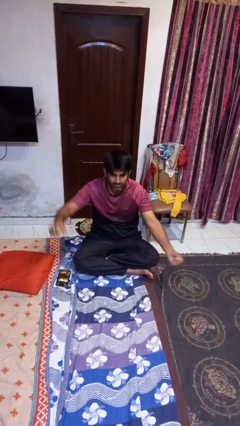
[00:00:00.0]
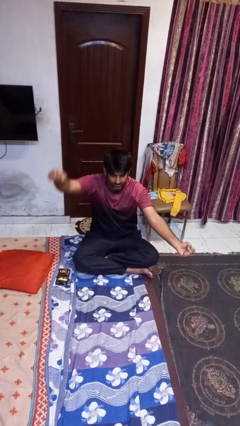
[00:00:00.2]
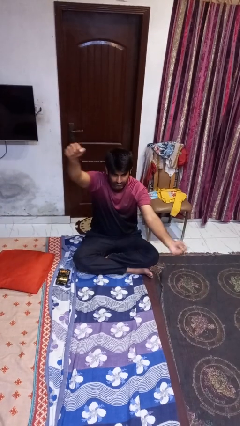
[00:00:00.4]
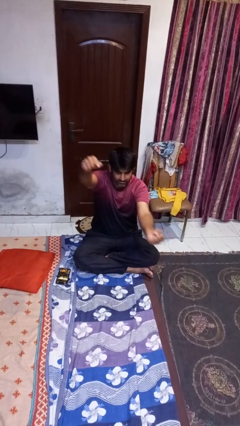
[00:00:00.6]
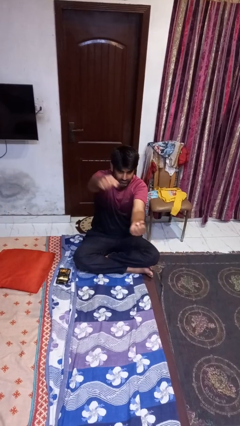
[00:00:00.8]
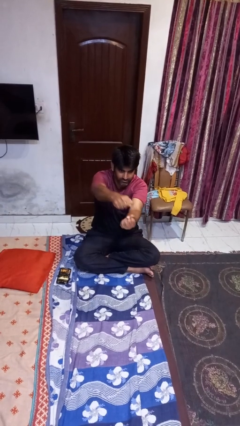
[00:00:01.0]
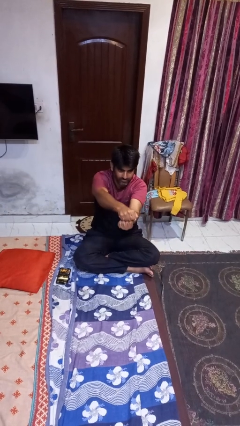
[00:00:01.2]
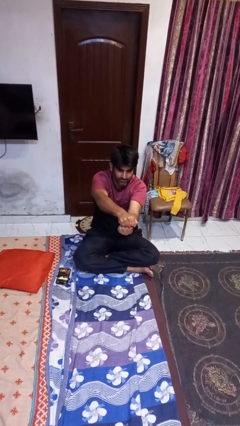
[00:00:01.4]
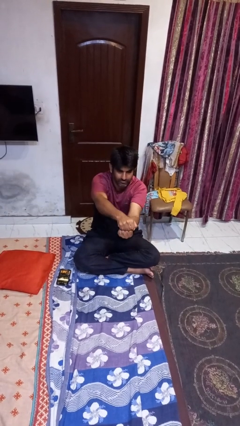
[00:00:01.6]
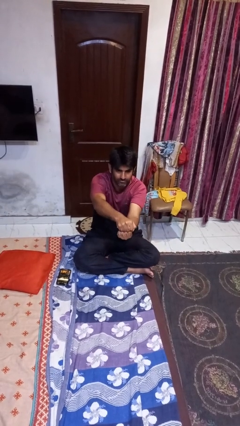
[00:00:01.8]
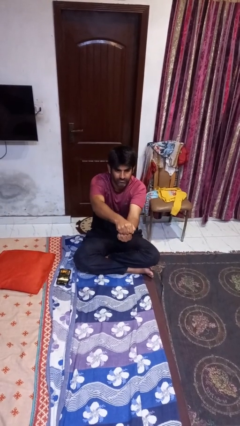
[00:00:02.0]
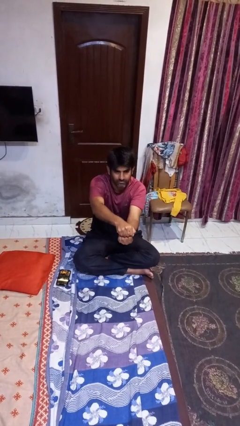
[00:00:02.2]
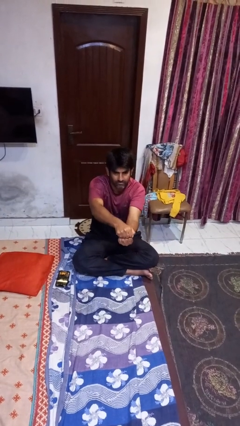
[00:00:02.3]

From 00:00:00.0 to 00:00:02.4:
person gestures zoom in

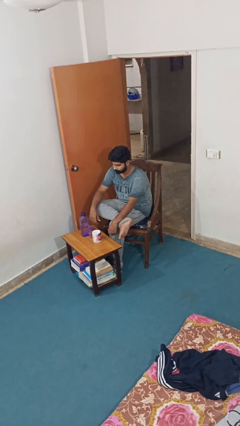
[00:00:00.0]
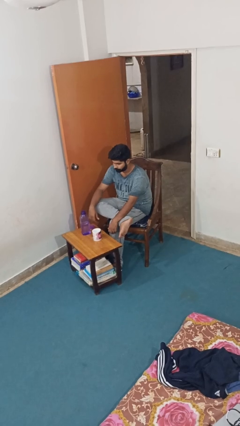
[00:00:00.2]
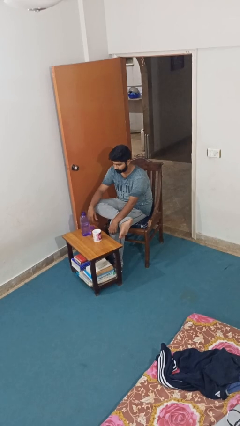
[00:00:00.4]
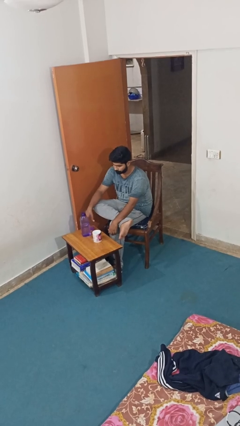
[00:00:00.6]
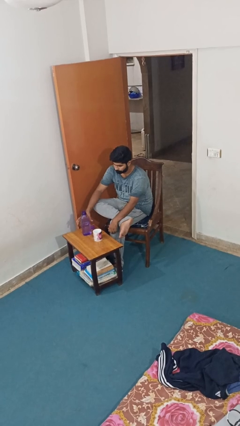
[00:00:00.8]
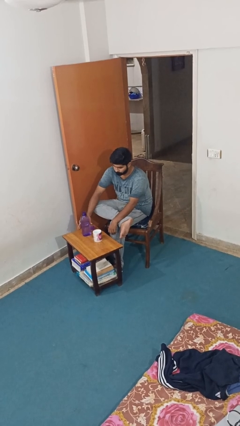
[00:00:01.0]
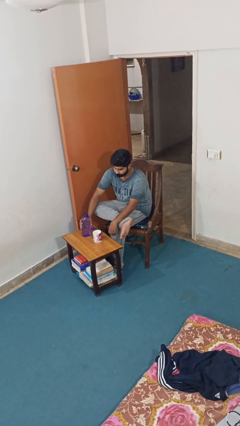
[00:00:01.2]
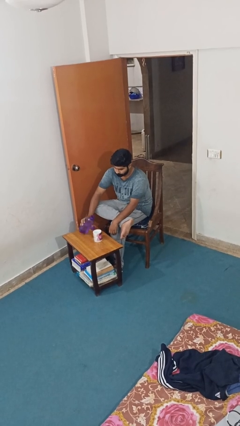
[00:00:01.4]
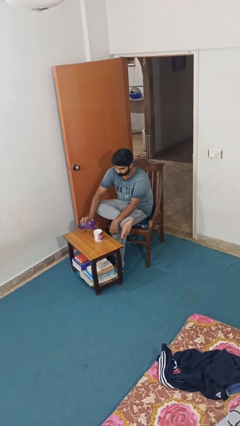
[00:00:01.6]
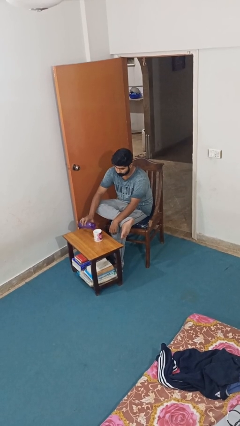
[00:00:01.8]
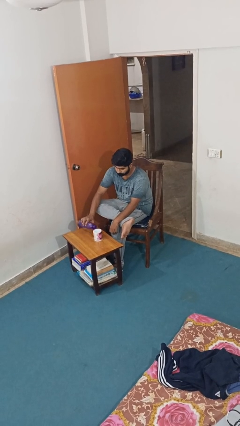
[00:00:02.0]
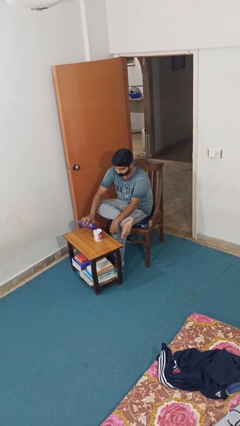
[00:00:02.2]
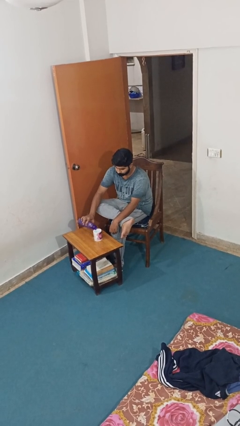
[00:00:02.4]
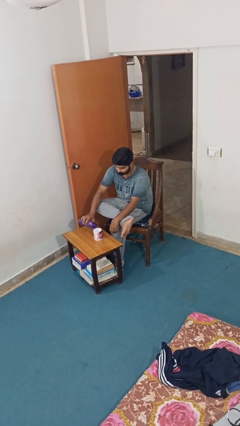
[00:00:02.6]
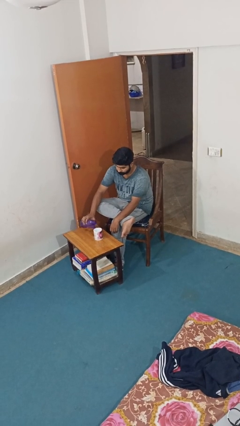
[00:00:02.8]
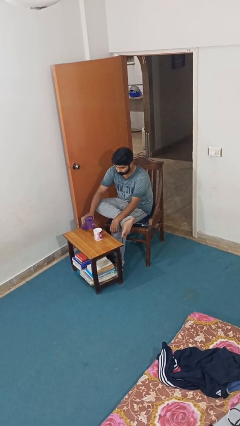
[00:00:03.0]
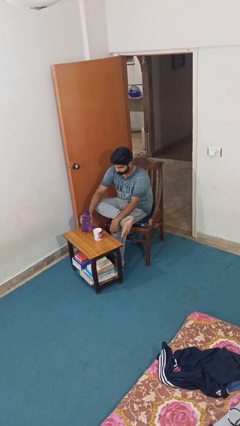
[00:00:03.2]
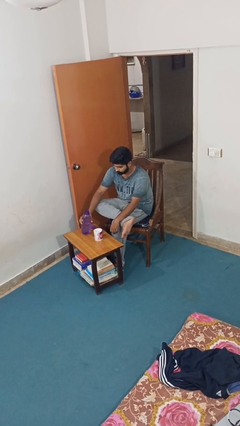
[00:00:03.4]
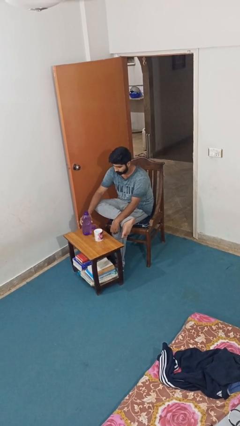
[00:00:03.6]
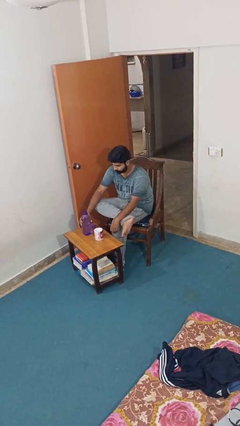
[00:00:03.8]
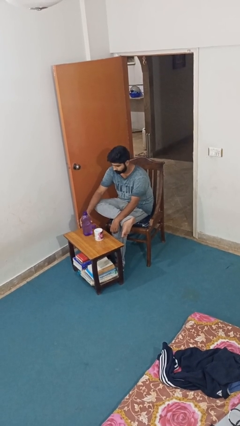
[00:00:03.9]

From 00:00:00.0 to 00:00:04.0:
person pours liquid into cup

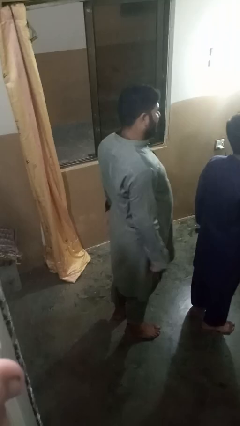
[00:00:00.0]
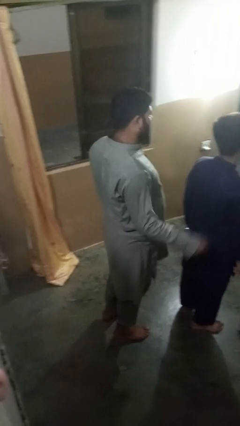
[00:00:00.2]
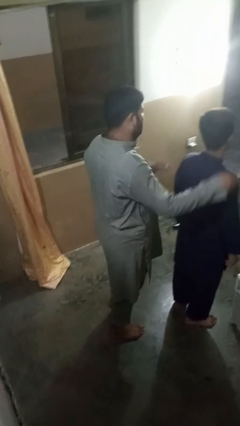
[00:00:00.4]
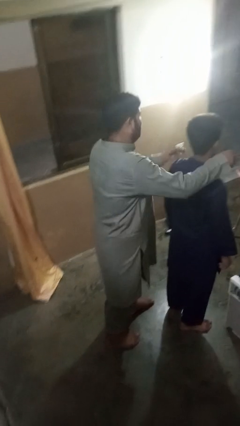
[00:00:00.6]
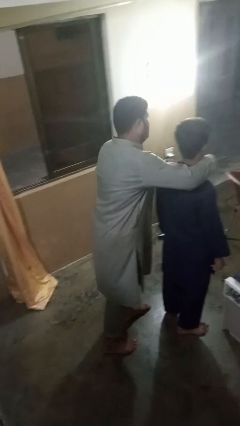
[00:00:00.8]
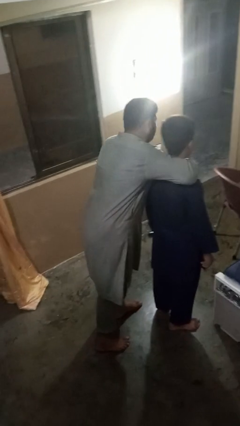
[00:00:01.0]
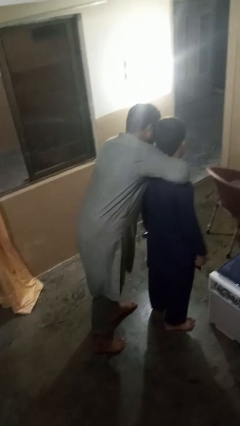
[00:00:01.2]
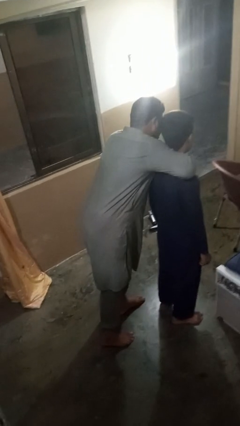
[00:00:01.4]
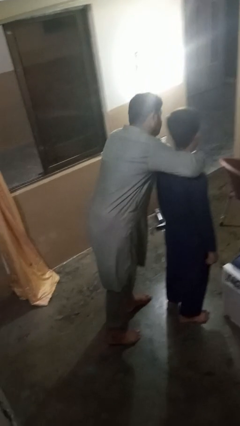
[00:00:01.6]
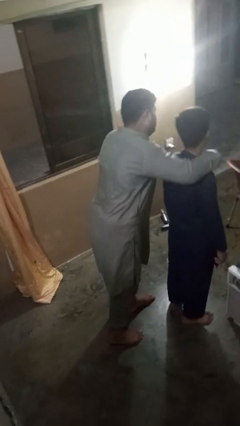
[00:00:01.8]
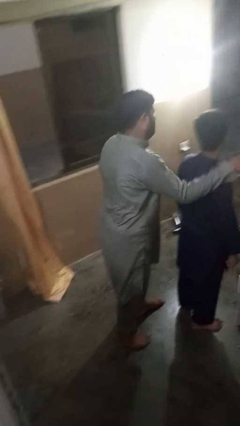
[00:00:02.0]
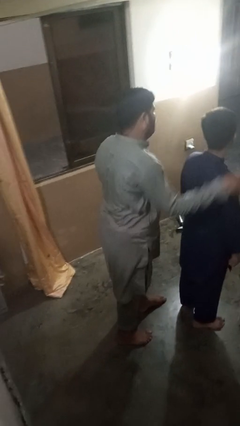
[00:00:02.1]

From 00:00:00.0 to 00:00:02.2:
person hugs person from behind

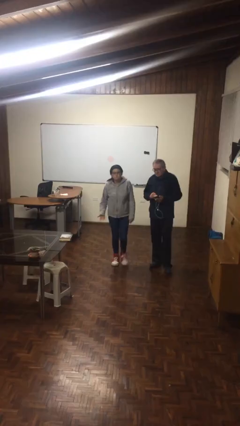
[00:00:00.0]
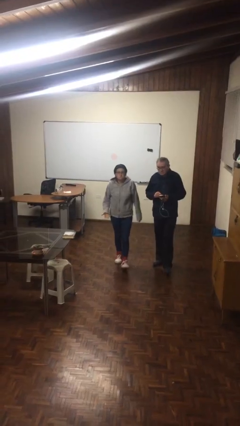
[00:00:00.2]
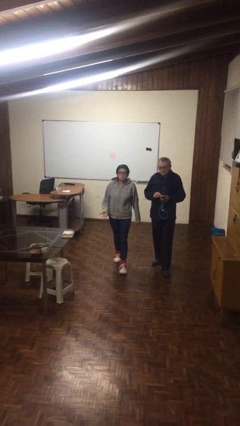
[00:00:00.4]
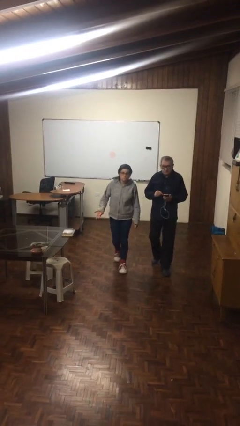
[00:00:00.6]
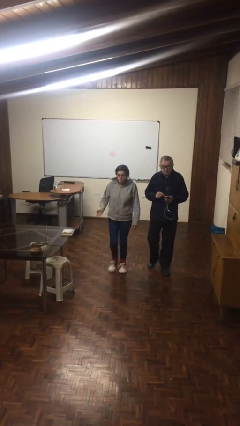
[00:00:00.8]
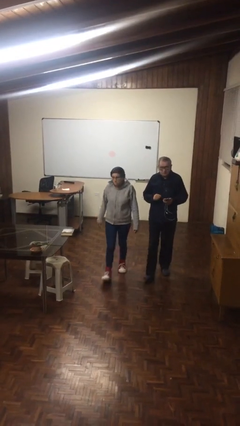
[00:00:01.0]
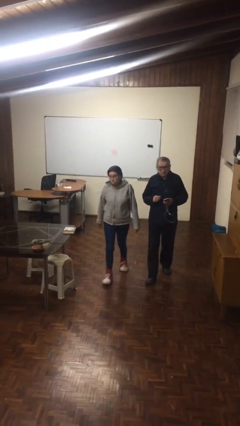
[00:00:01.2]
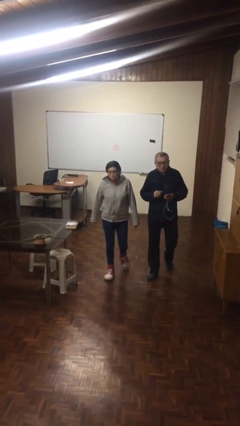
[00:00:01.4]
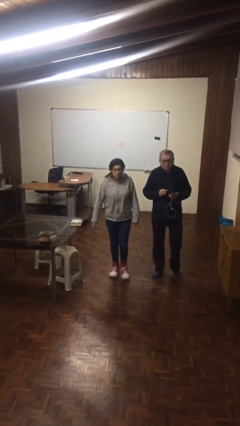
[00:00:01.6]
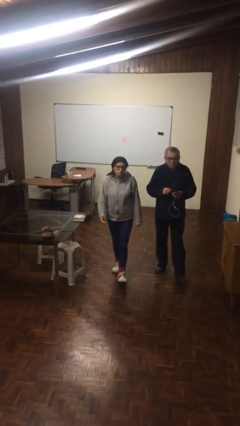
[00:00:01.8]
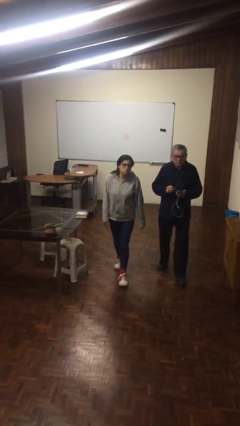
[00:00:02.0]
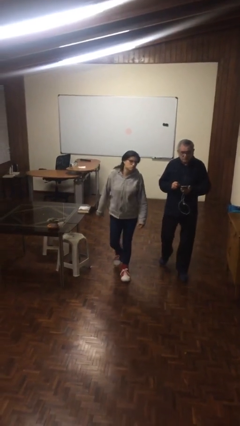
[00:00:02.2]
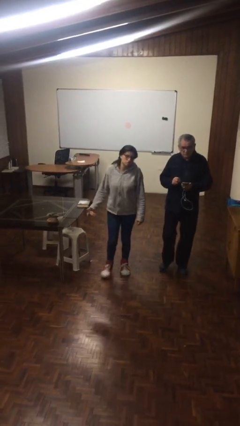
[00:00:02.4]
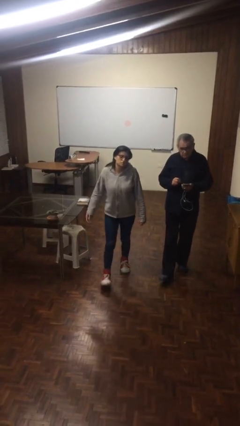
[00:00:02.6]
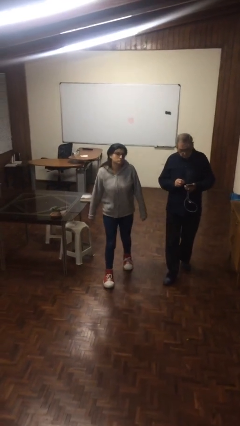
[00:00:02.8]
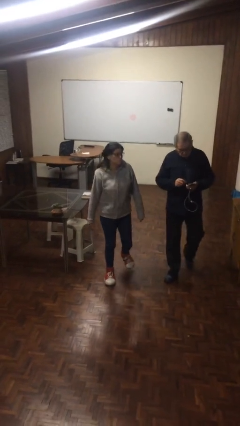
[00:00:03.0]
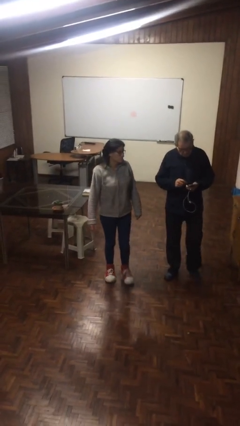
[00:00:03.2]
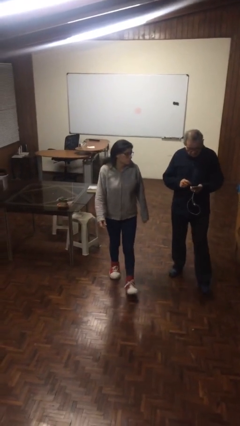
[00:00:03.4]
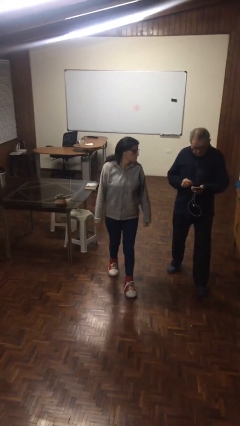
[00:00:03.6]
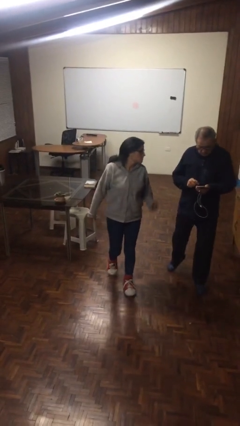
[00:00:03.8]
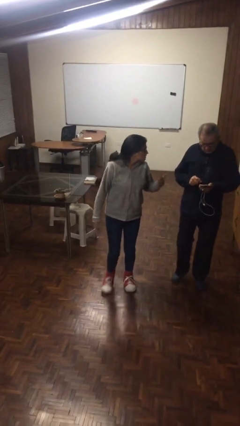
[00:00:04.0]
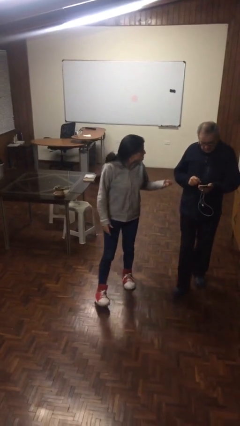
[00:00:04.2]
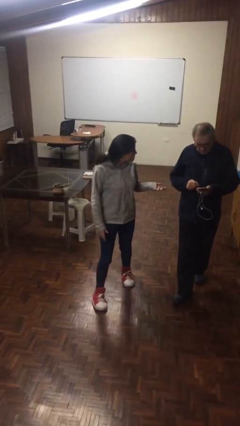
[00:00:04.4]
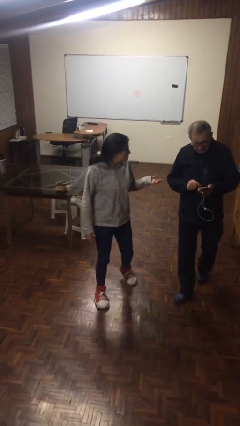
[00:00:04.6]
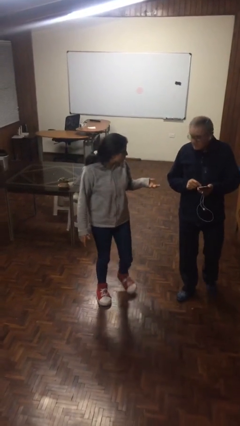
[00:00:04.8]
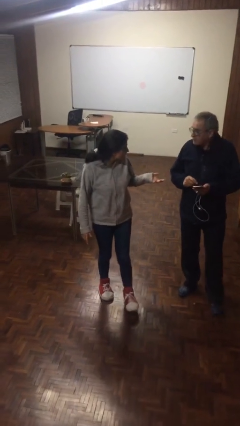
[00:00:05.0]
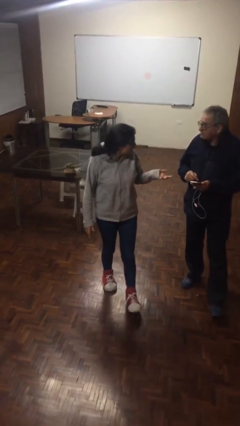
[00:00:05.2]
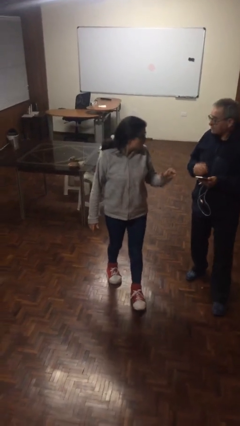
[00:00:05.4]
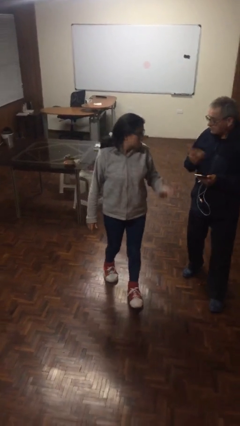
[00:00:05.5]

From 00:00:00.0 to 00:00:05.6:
person talks to person

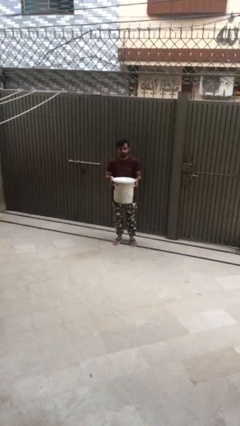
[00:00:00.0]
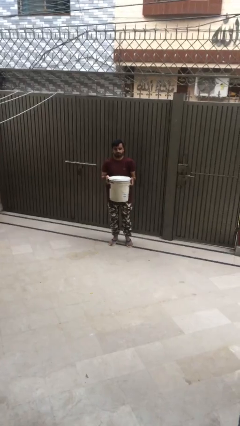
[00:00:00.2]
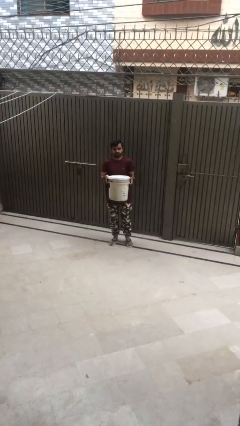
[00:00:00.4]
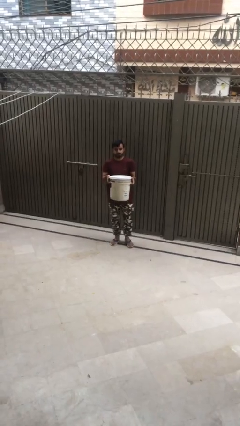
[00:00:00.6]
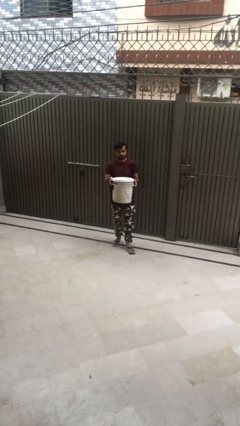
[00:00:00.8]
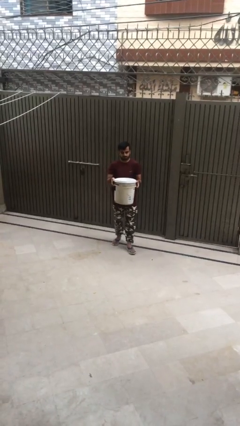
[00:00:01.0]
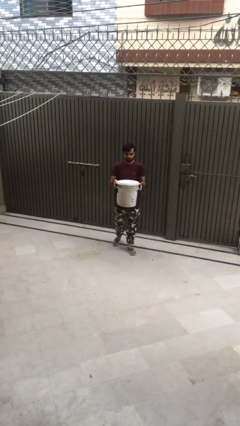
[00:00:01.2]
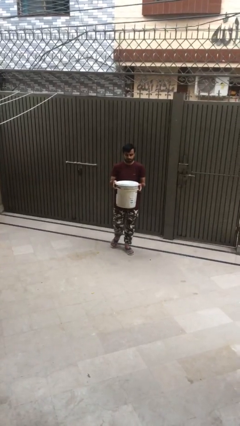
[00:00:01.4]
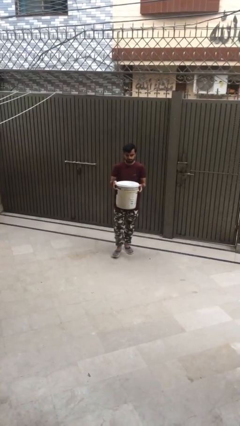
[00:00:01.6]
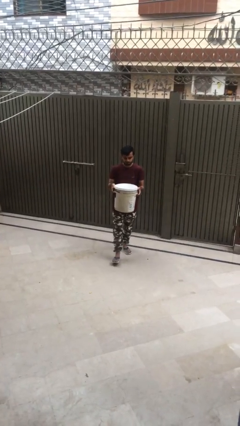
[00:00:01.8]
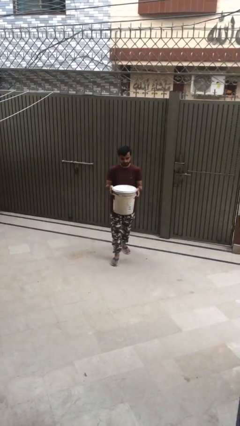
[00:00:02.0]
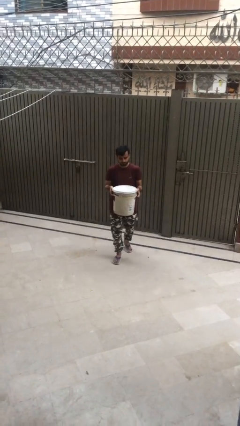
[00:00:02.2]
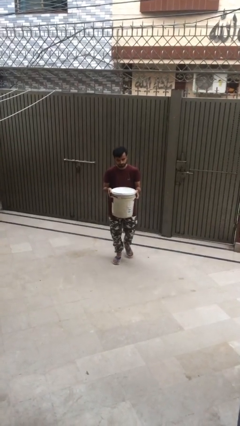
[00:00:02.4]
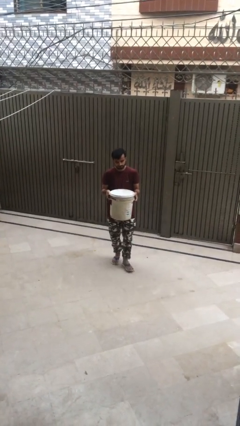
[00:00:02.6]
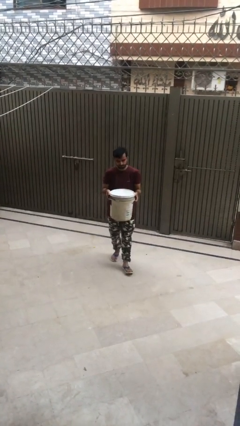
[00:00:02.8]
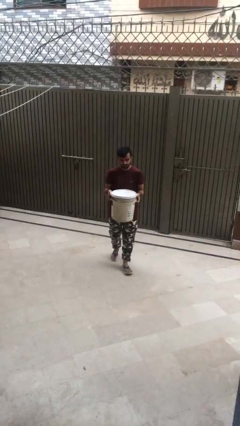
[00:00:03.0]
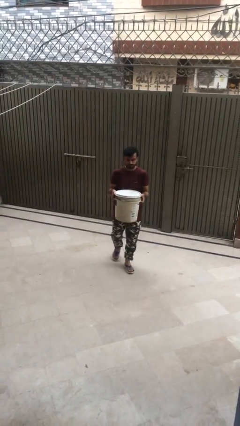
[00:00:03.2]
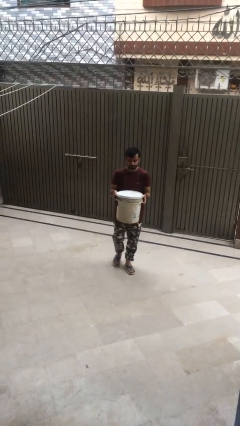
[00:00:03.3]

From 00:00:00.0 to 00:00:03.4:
person carries heavy object
